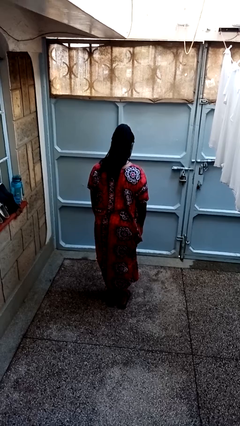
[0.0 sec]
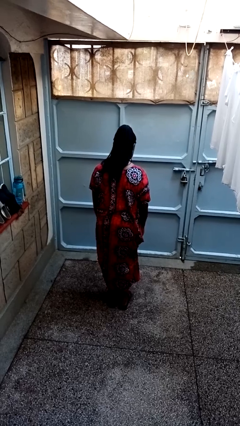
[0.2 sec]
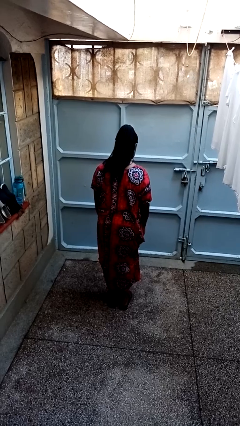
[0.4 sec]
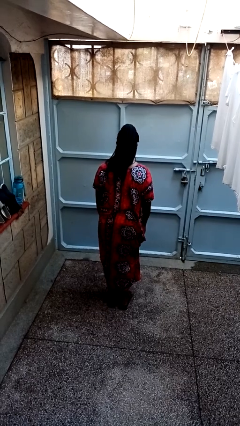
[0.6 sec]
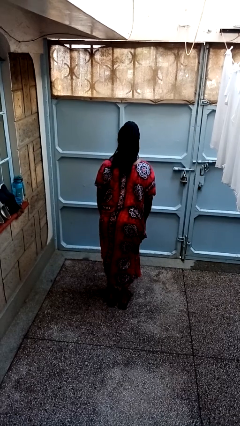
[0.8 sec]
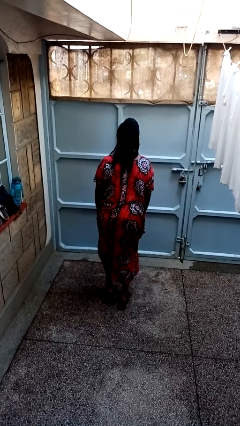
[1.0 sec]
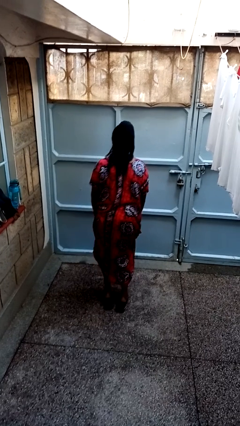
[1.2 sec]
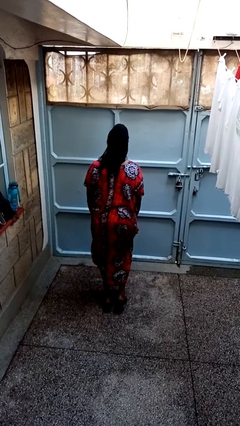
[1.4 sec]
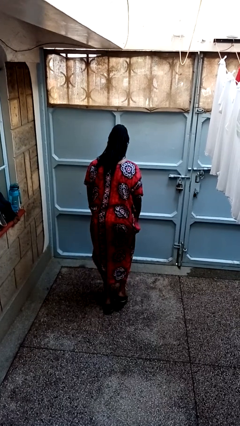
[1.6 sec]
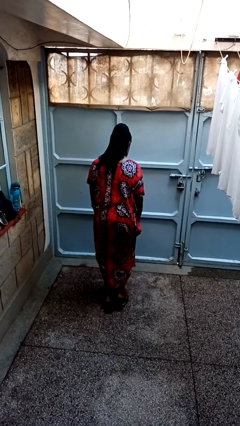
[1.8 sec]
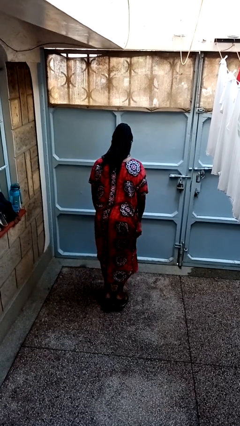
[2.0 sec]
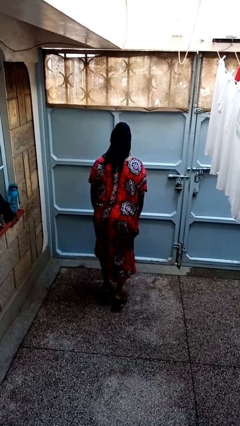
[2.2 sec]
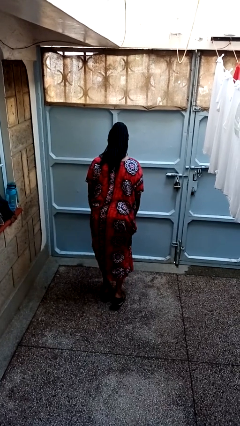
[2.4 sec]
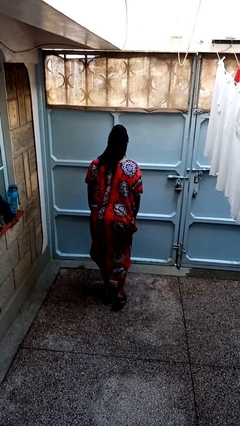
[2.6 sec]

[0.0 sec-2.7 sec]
person walks tiptoe

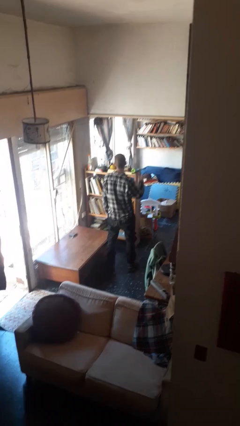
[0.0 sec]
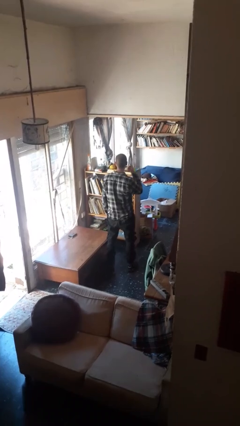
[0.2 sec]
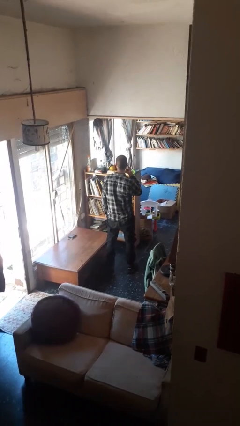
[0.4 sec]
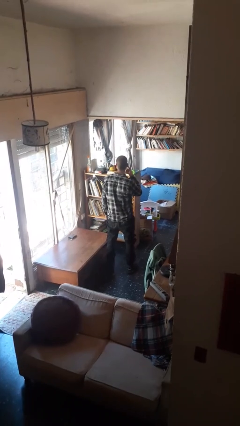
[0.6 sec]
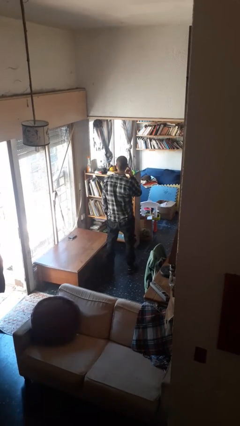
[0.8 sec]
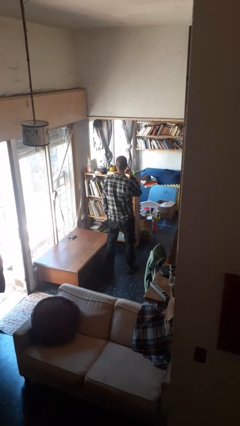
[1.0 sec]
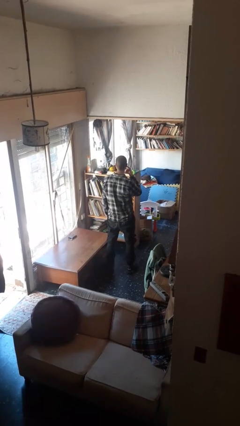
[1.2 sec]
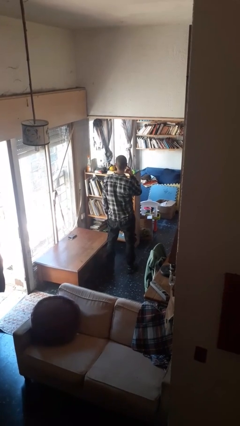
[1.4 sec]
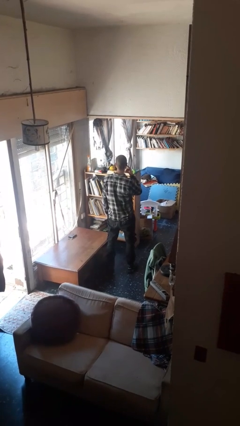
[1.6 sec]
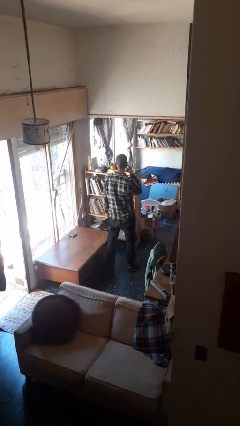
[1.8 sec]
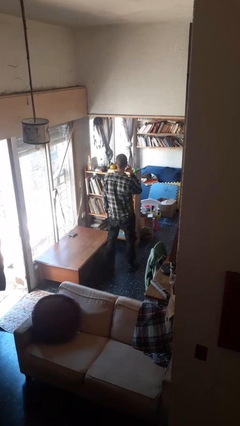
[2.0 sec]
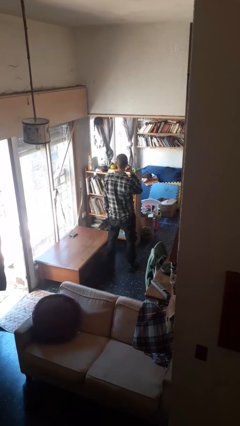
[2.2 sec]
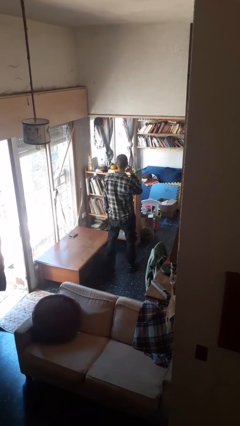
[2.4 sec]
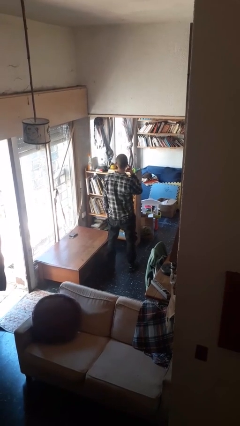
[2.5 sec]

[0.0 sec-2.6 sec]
person gestures listen closely

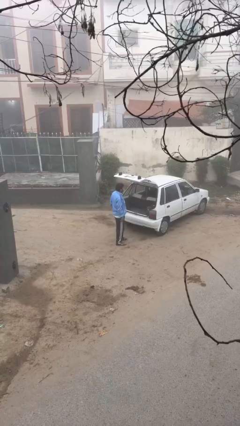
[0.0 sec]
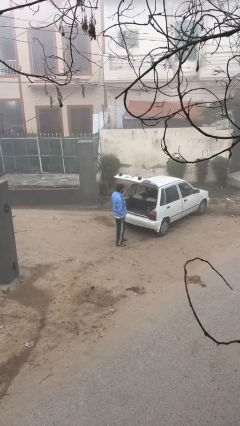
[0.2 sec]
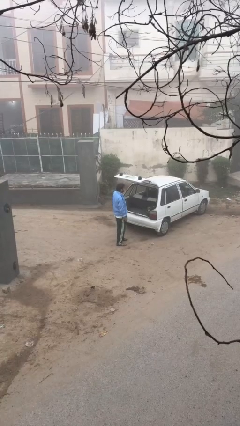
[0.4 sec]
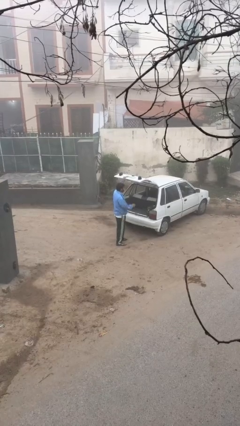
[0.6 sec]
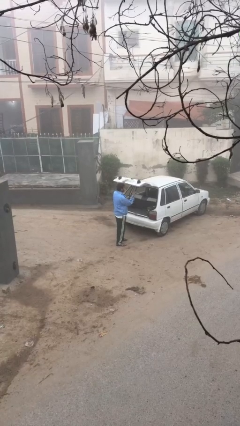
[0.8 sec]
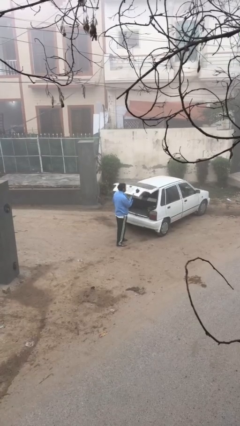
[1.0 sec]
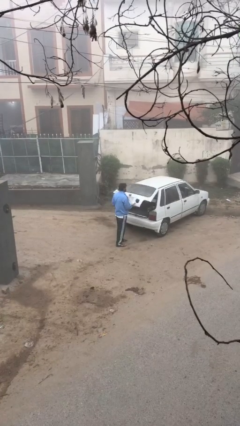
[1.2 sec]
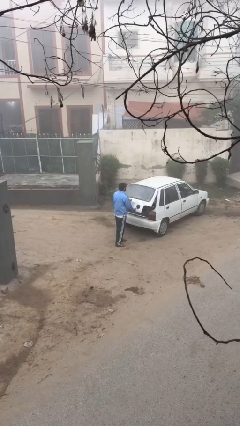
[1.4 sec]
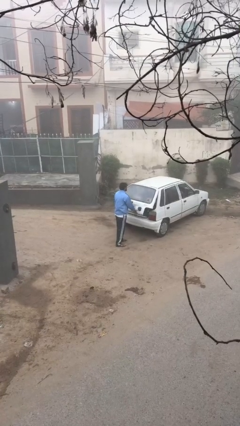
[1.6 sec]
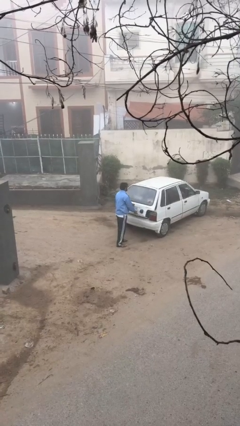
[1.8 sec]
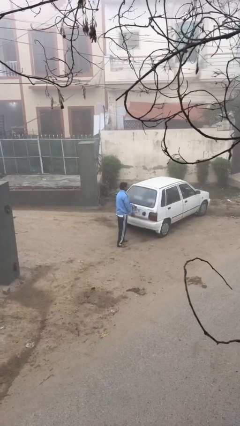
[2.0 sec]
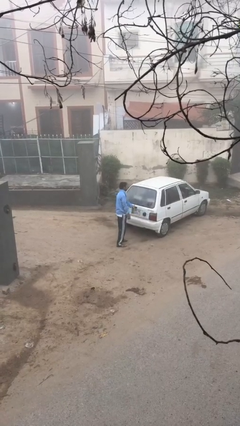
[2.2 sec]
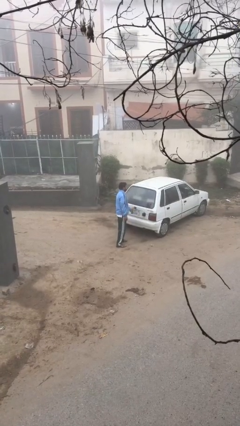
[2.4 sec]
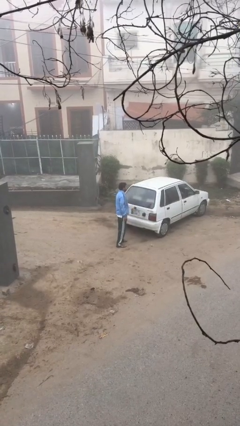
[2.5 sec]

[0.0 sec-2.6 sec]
person closes car trunk

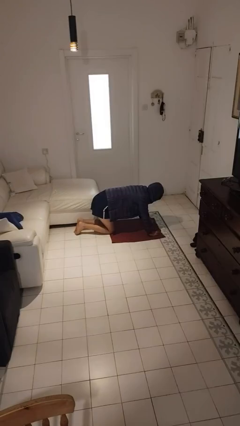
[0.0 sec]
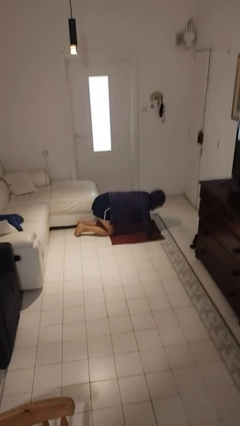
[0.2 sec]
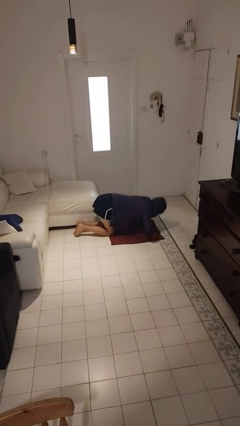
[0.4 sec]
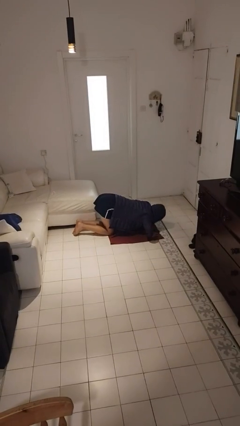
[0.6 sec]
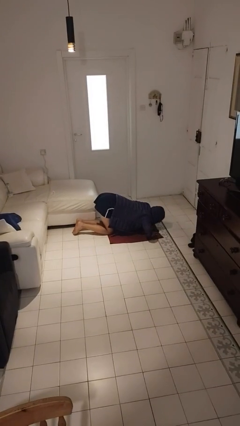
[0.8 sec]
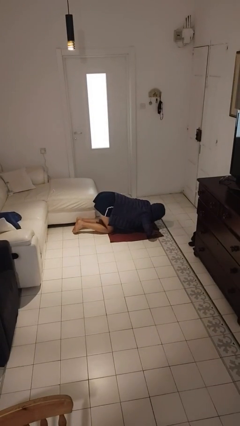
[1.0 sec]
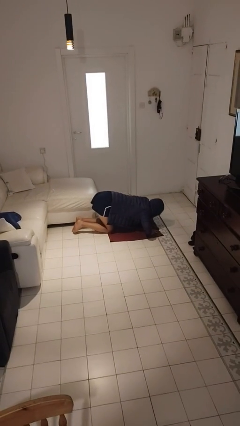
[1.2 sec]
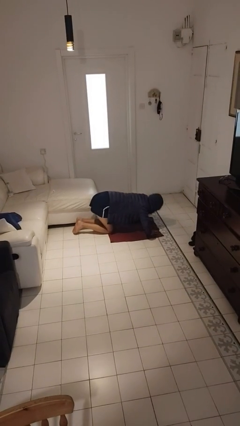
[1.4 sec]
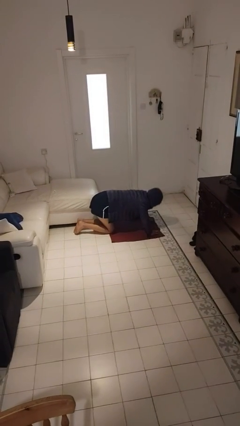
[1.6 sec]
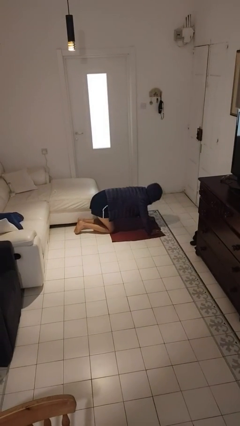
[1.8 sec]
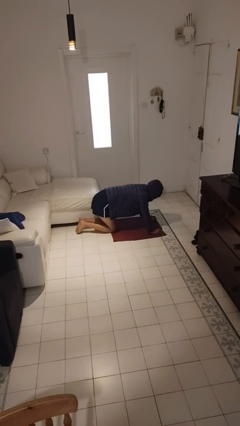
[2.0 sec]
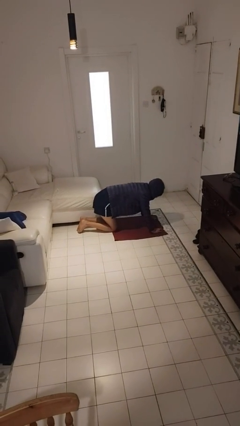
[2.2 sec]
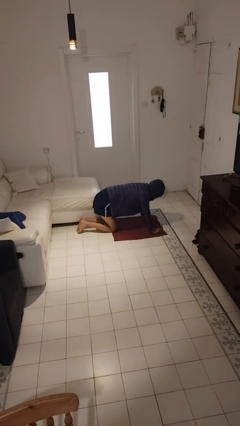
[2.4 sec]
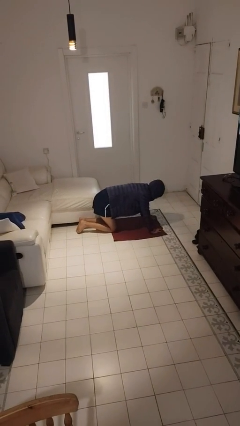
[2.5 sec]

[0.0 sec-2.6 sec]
person exercises with pushup

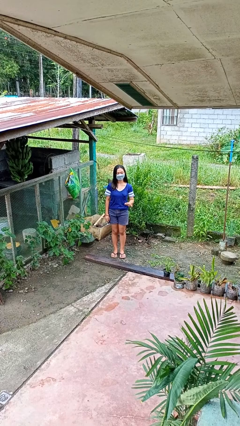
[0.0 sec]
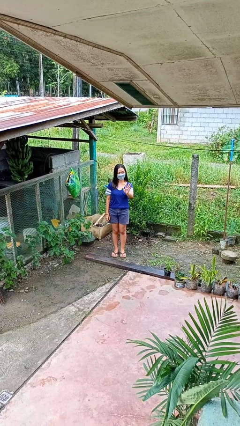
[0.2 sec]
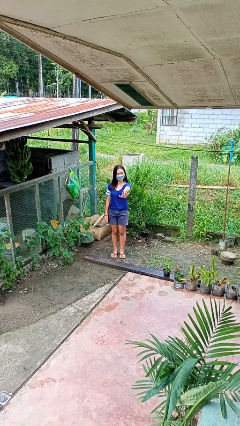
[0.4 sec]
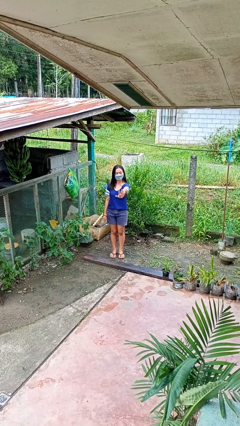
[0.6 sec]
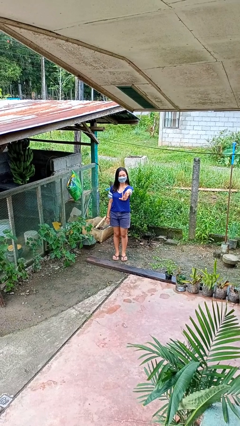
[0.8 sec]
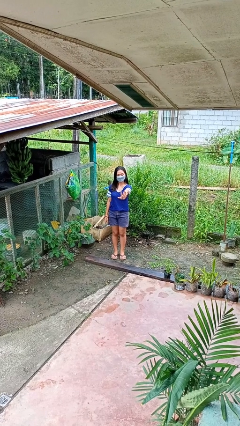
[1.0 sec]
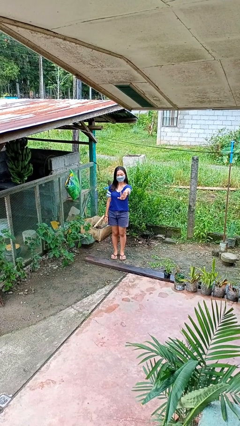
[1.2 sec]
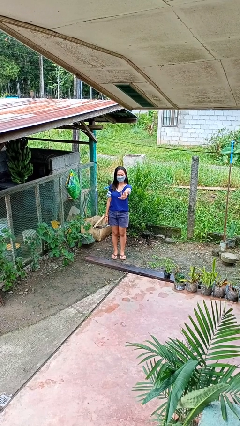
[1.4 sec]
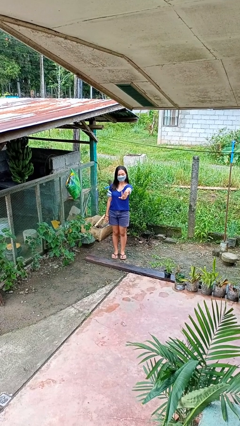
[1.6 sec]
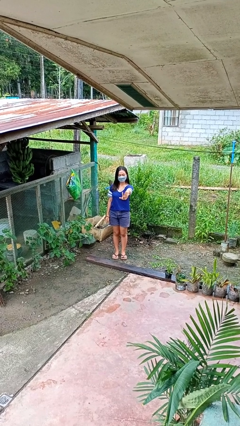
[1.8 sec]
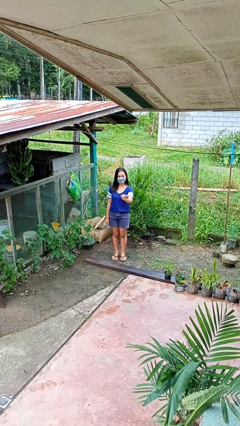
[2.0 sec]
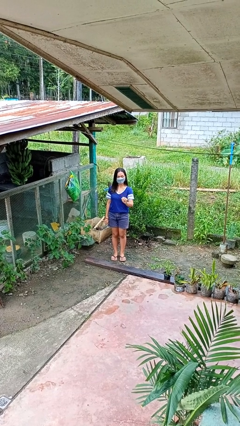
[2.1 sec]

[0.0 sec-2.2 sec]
person gestures stop

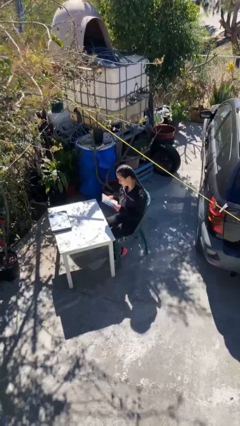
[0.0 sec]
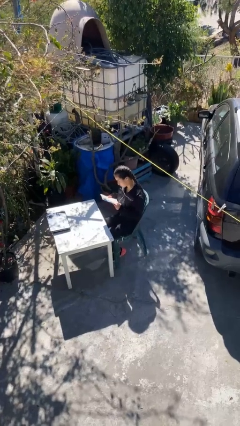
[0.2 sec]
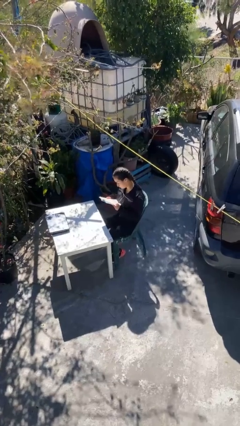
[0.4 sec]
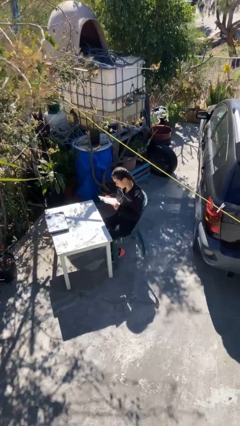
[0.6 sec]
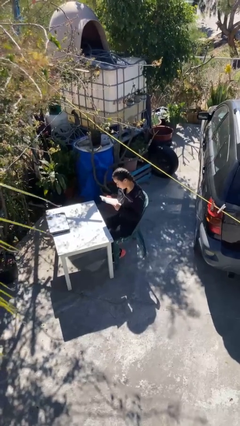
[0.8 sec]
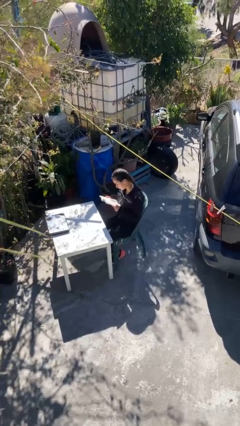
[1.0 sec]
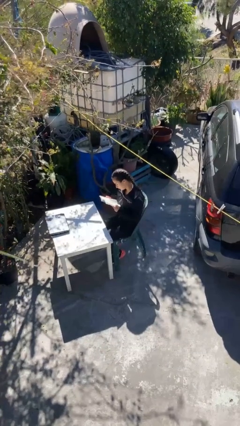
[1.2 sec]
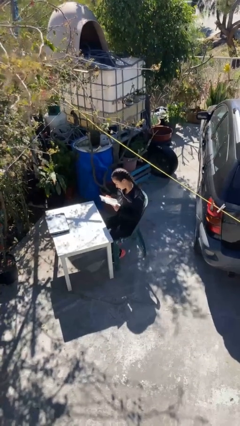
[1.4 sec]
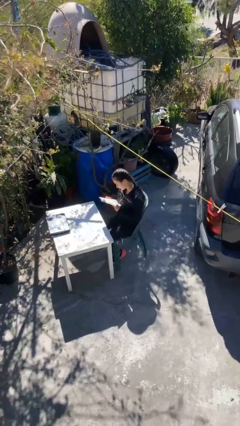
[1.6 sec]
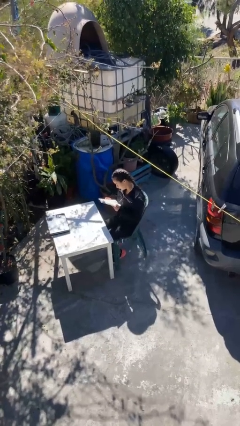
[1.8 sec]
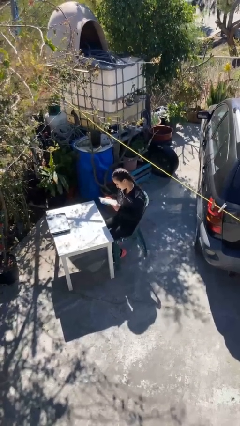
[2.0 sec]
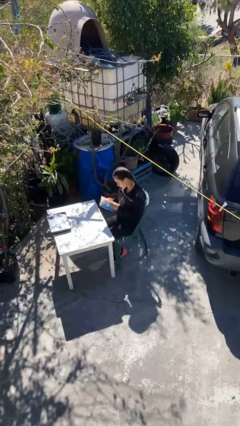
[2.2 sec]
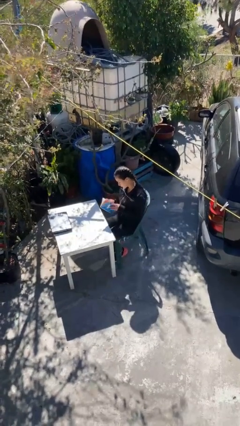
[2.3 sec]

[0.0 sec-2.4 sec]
person reads document

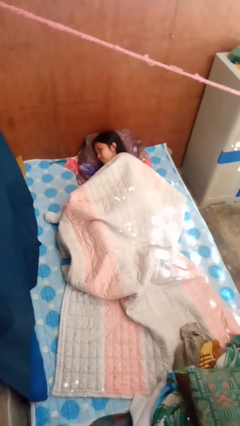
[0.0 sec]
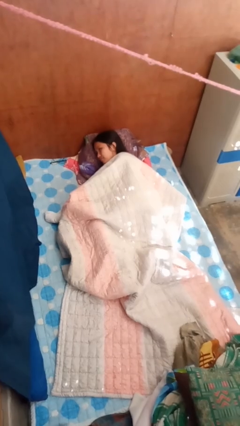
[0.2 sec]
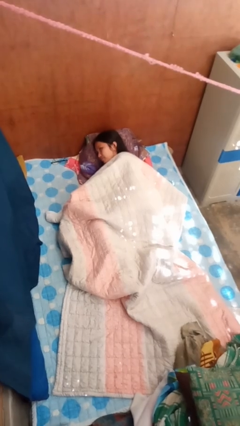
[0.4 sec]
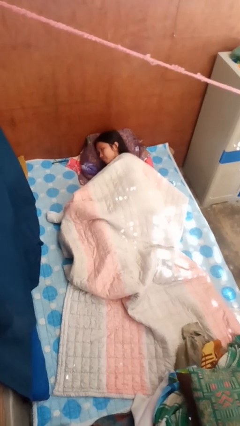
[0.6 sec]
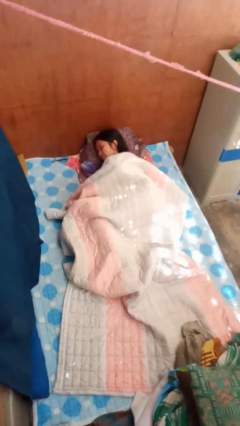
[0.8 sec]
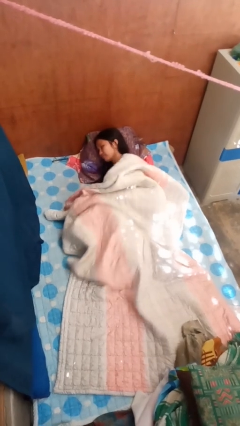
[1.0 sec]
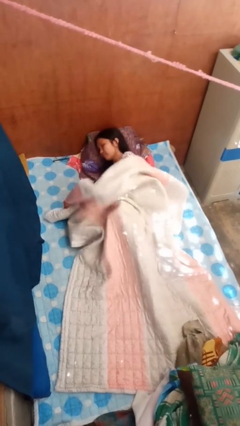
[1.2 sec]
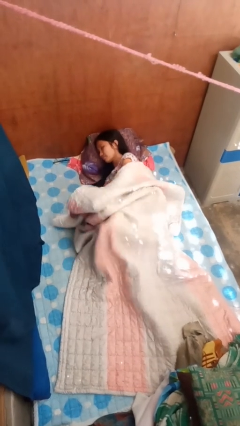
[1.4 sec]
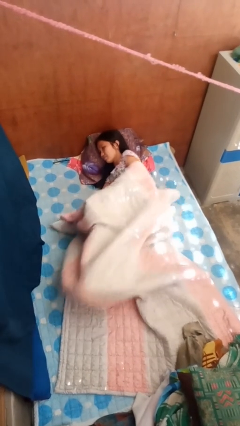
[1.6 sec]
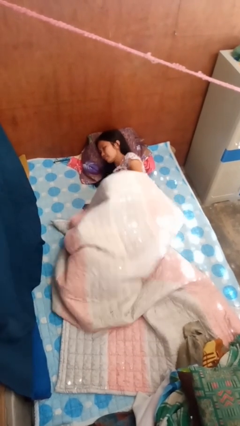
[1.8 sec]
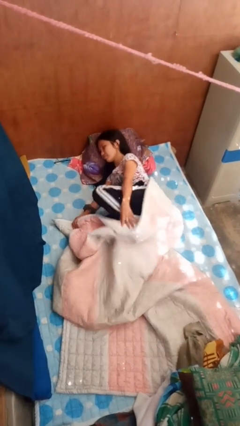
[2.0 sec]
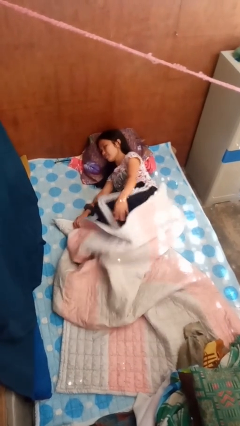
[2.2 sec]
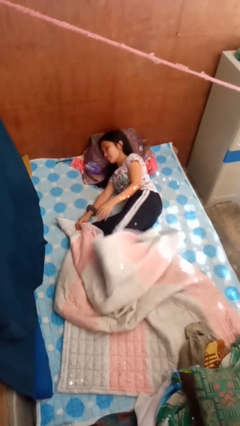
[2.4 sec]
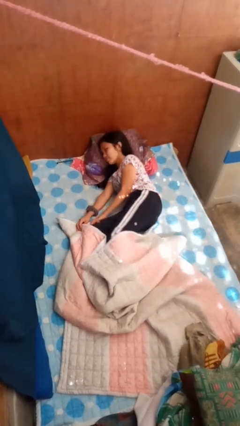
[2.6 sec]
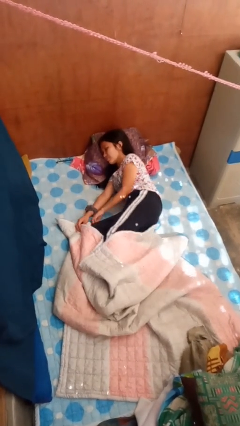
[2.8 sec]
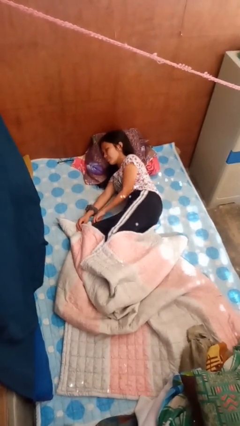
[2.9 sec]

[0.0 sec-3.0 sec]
person uncovers with bedsheets
